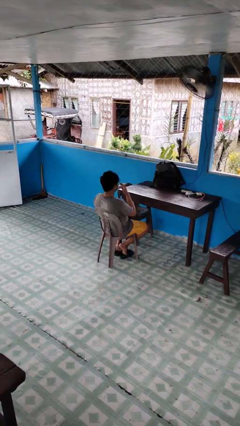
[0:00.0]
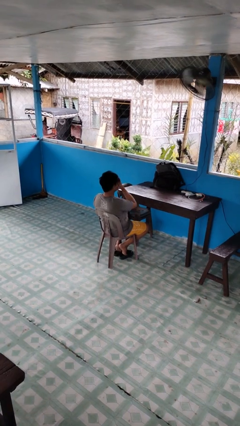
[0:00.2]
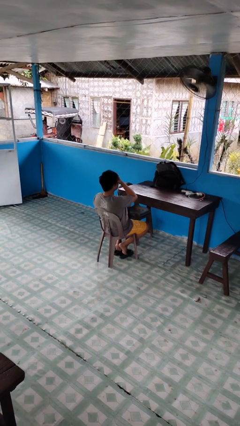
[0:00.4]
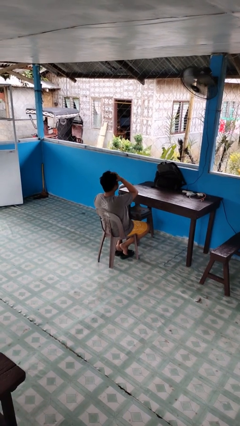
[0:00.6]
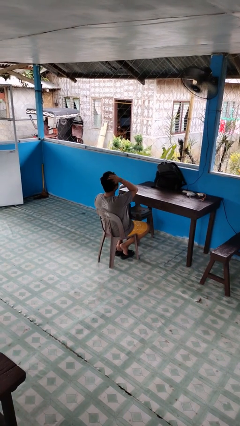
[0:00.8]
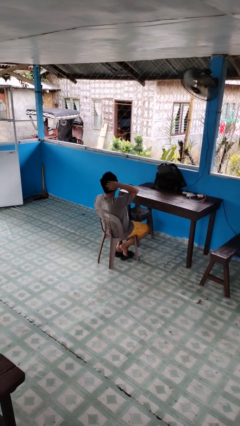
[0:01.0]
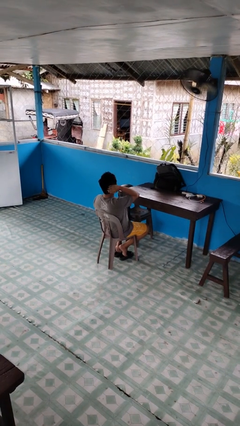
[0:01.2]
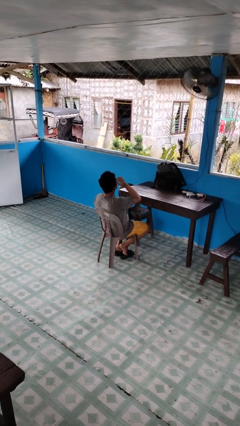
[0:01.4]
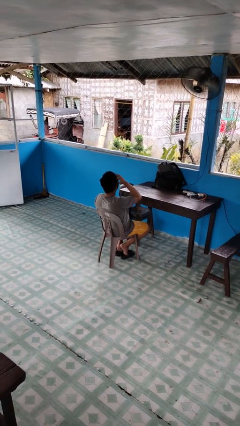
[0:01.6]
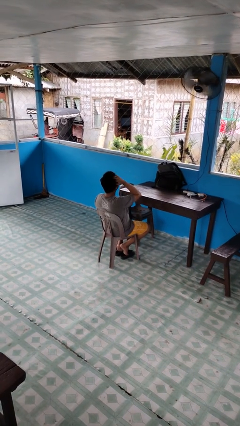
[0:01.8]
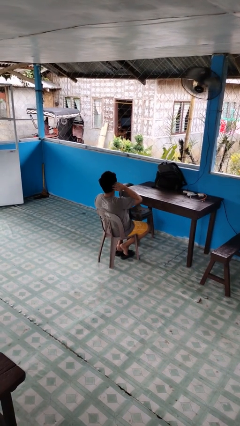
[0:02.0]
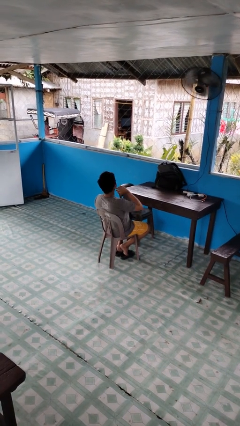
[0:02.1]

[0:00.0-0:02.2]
person strokes hair

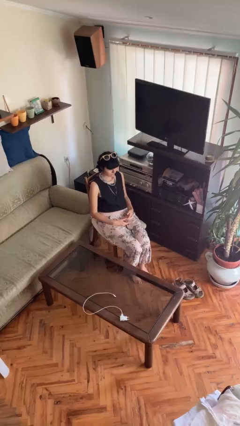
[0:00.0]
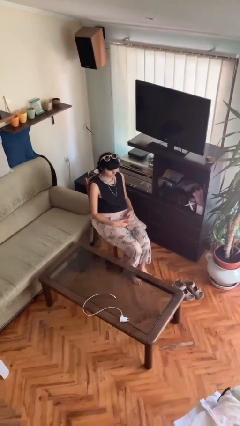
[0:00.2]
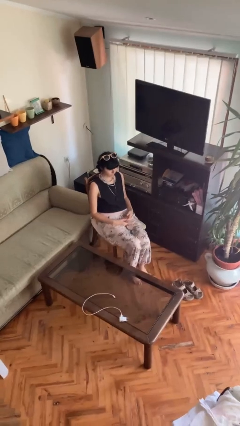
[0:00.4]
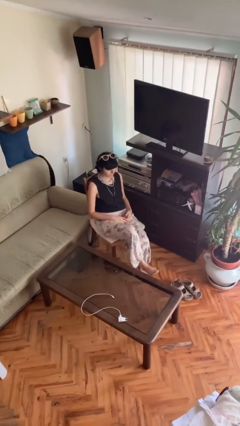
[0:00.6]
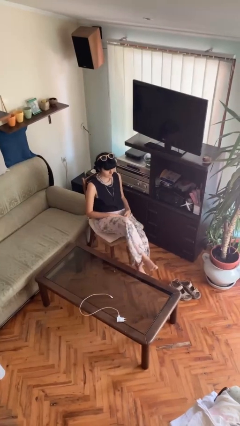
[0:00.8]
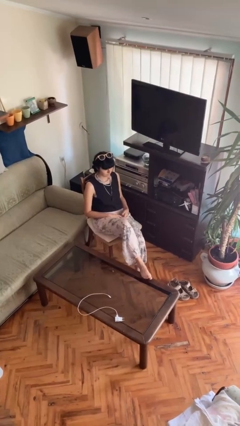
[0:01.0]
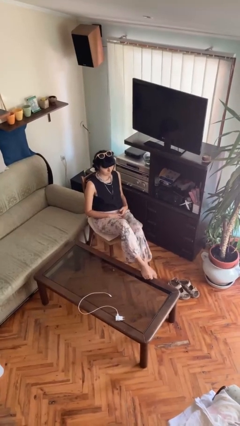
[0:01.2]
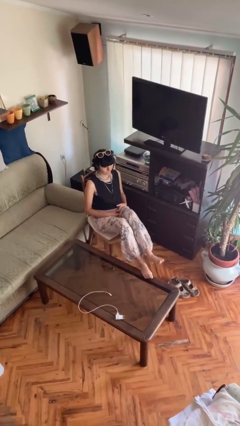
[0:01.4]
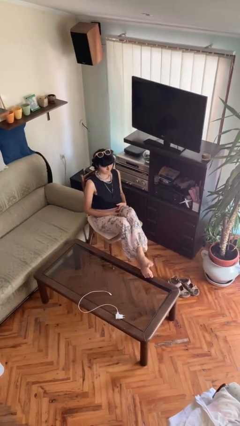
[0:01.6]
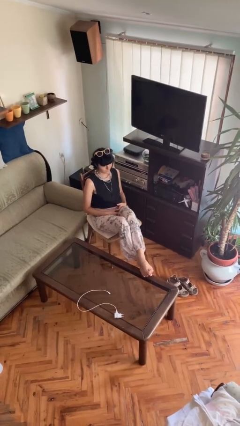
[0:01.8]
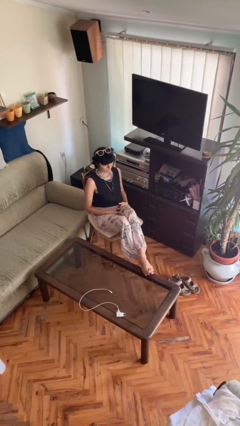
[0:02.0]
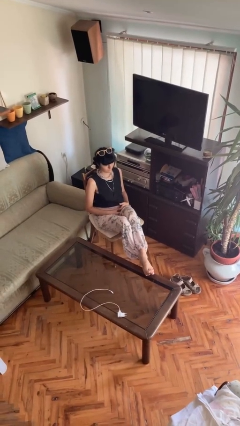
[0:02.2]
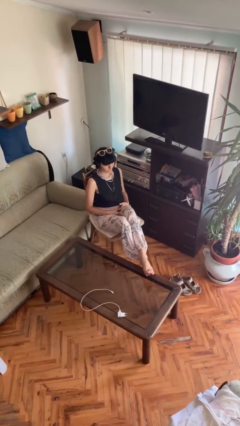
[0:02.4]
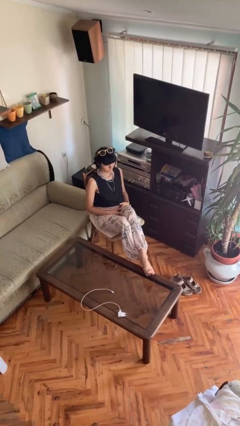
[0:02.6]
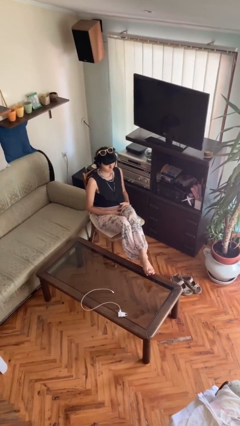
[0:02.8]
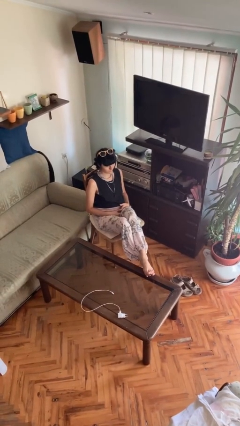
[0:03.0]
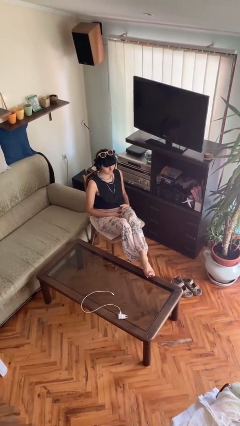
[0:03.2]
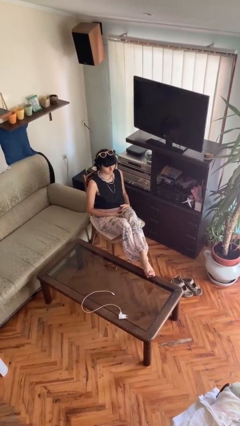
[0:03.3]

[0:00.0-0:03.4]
person puts feet up

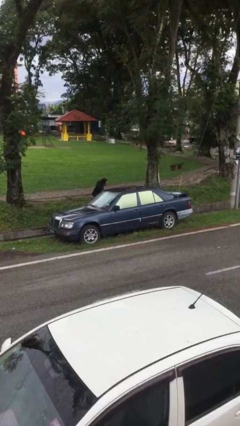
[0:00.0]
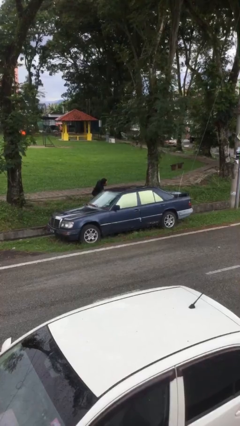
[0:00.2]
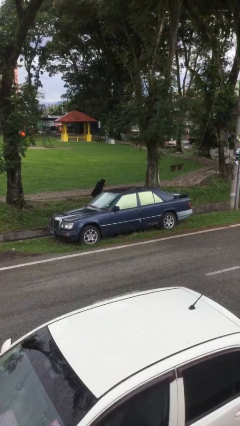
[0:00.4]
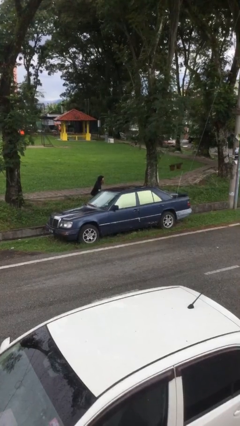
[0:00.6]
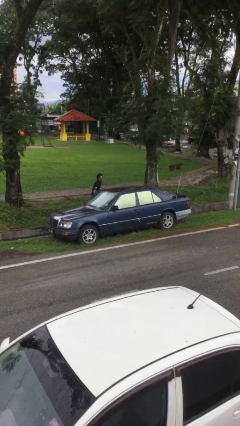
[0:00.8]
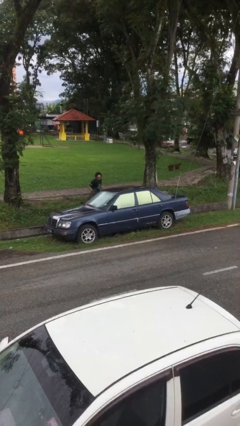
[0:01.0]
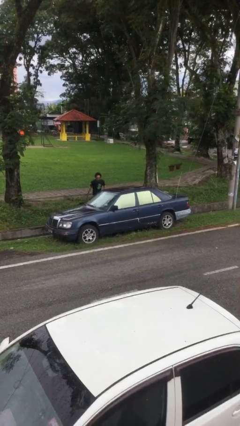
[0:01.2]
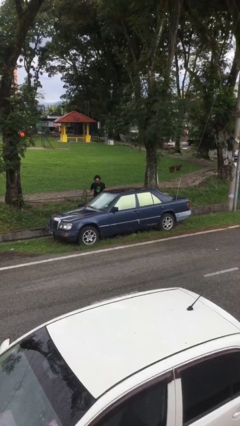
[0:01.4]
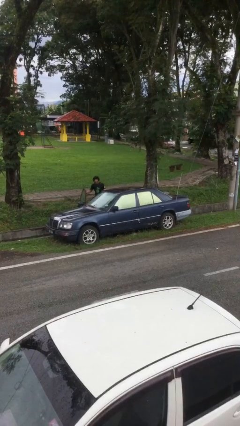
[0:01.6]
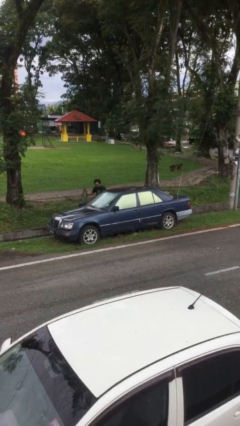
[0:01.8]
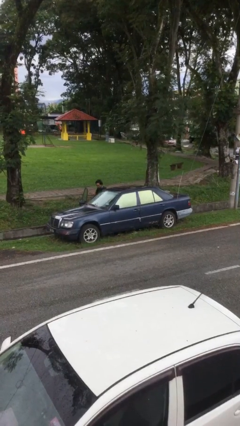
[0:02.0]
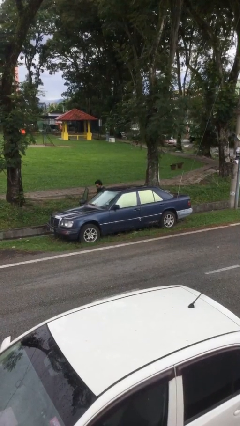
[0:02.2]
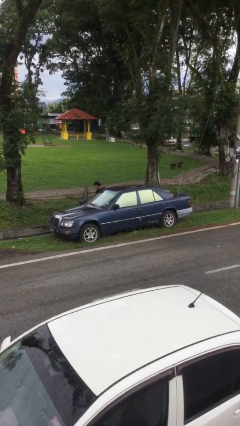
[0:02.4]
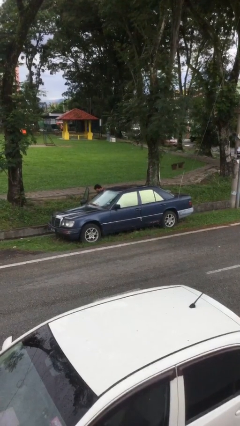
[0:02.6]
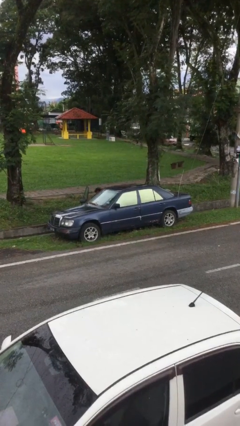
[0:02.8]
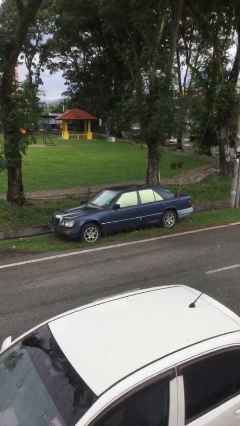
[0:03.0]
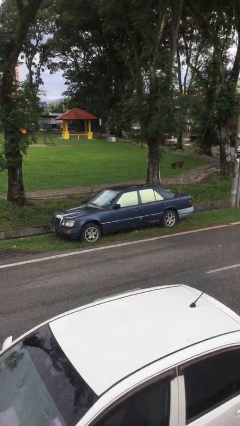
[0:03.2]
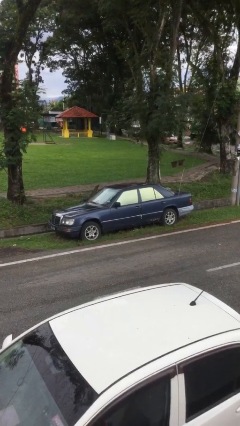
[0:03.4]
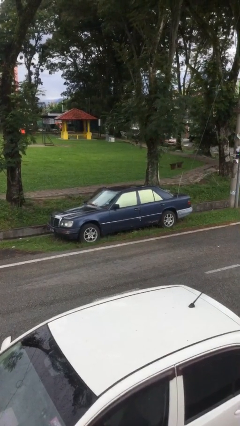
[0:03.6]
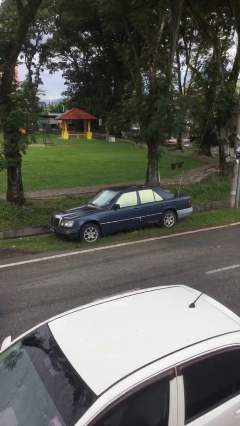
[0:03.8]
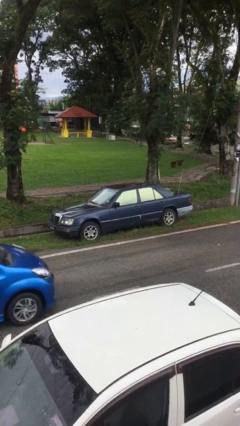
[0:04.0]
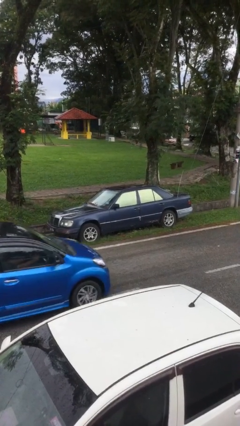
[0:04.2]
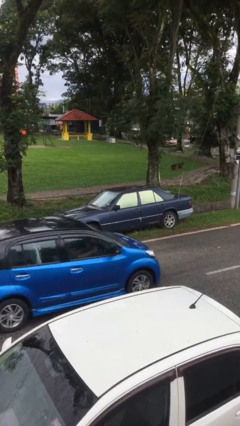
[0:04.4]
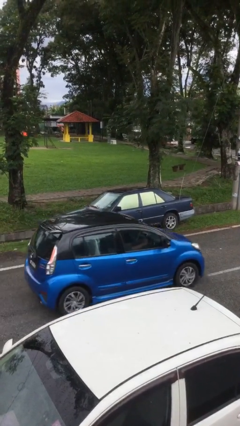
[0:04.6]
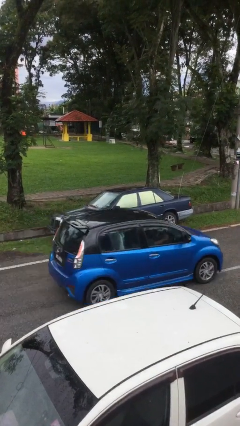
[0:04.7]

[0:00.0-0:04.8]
car picks up person

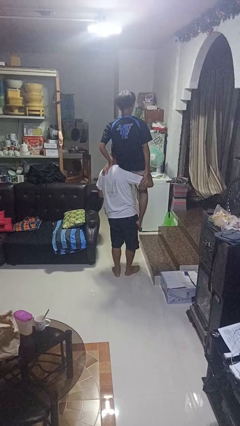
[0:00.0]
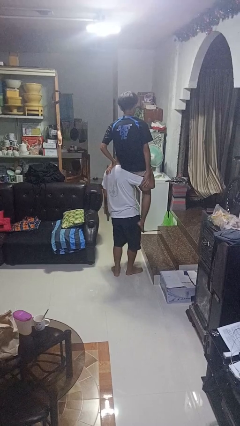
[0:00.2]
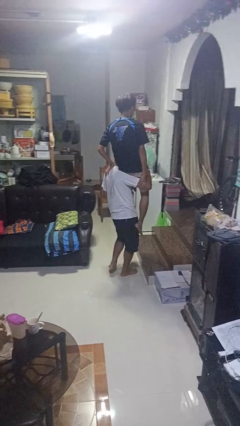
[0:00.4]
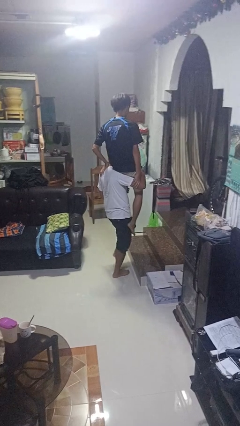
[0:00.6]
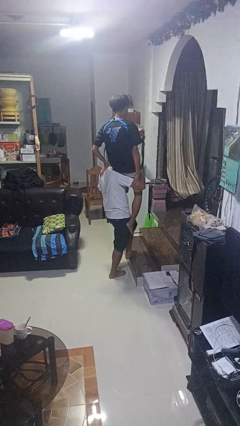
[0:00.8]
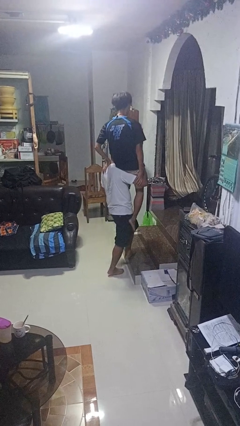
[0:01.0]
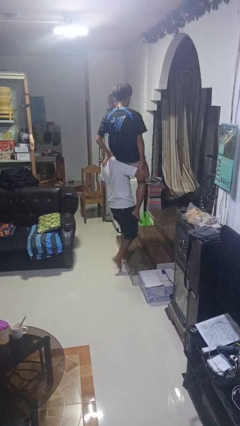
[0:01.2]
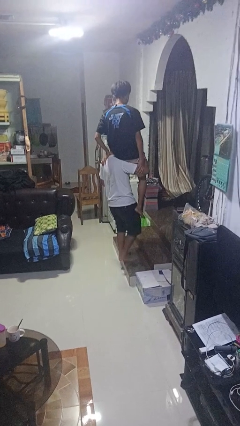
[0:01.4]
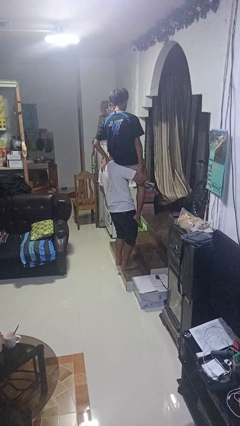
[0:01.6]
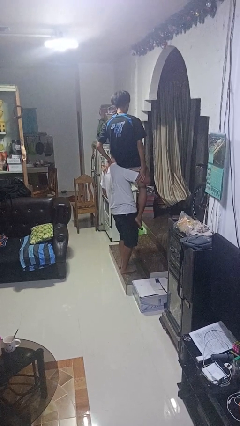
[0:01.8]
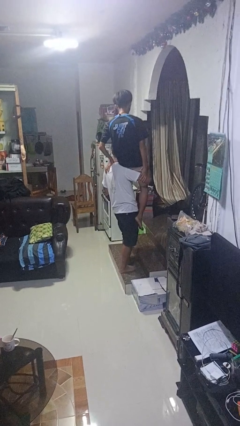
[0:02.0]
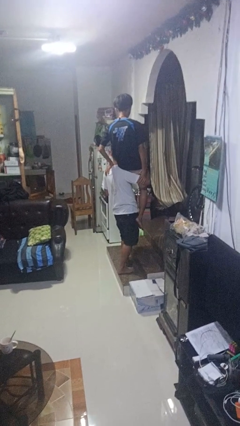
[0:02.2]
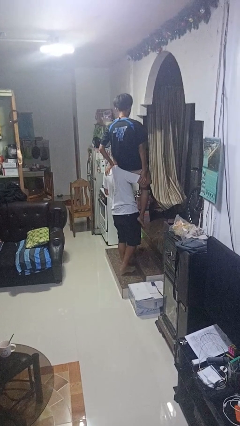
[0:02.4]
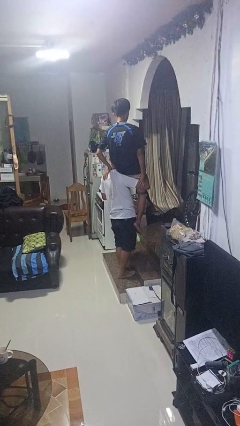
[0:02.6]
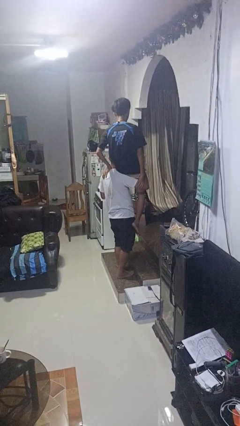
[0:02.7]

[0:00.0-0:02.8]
person carries person on shoulders

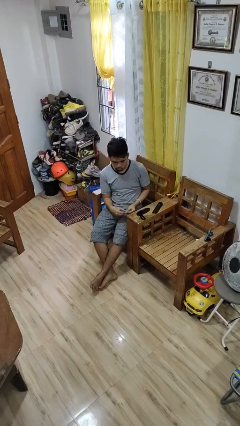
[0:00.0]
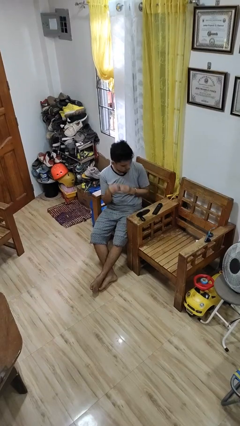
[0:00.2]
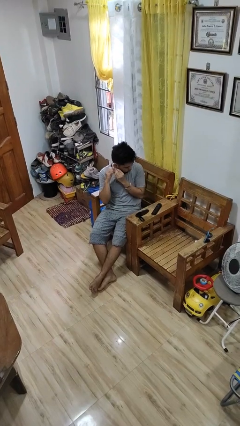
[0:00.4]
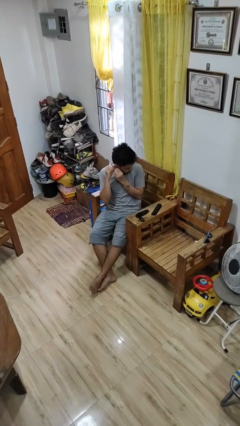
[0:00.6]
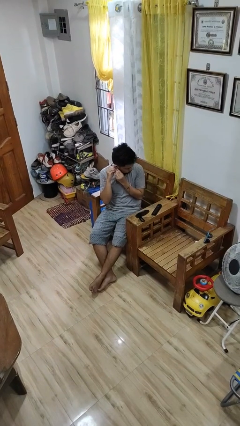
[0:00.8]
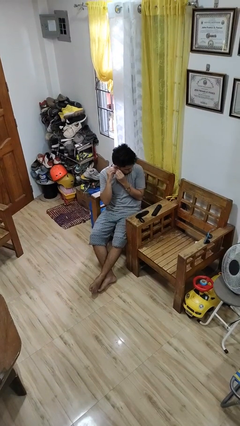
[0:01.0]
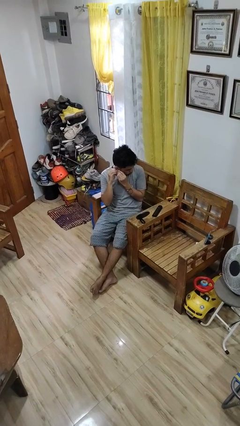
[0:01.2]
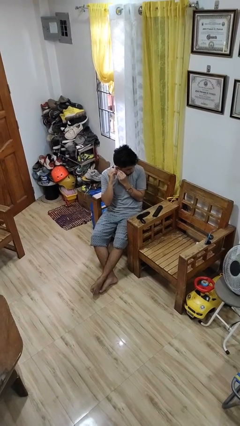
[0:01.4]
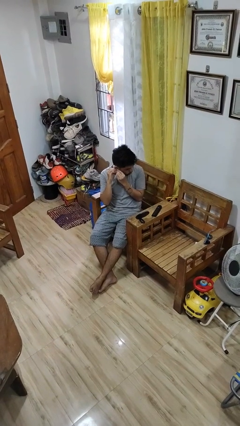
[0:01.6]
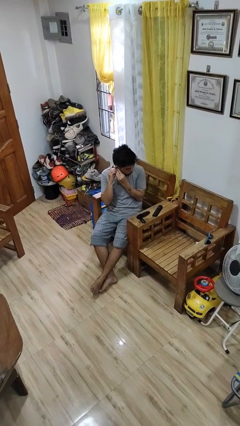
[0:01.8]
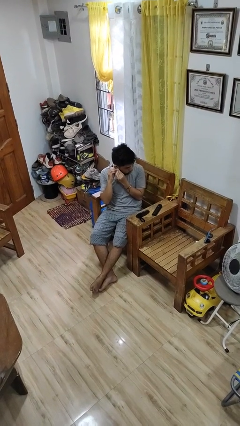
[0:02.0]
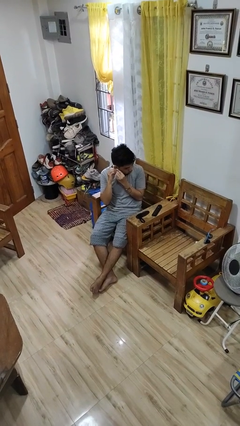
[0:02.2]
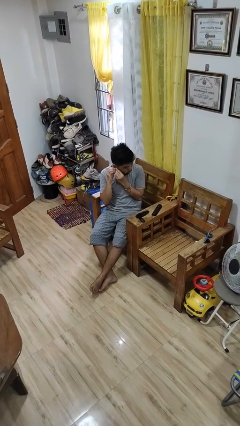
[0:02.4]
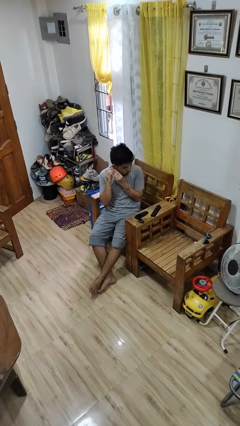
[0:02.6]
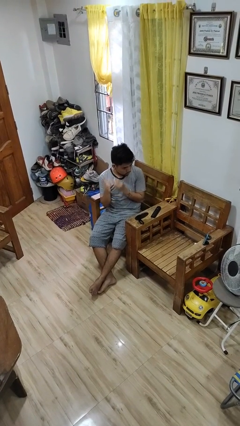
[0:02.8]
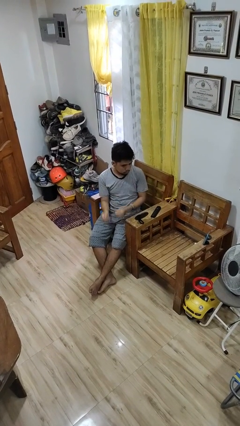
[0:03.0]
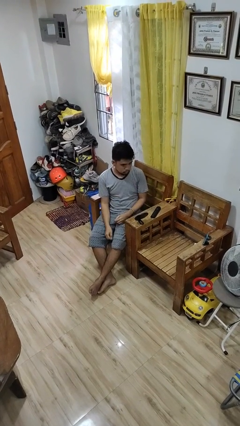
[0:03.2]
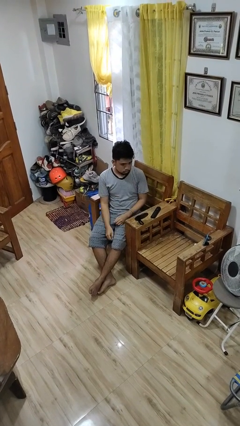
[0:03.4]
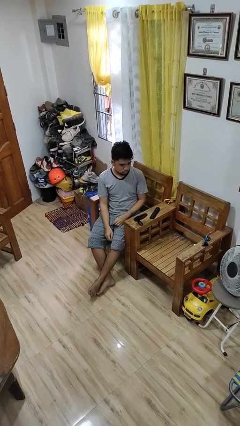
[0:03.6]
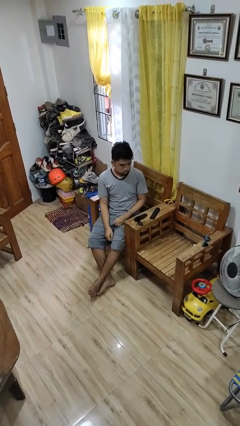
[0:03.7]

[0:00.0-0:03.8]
person puts on earrings

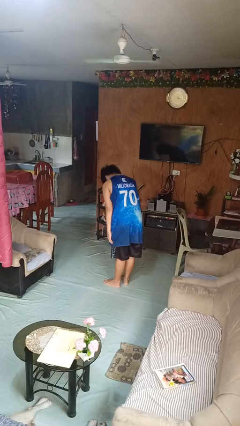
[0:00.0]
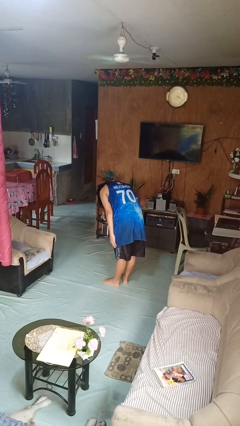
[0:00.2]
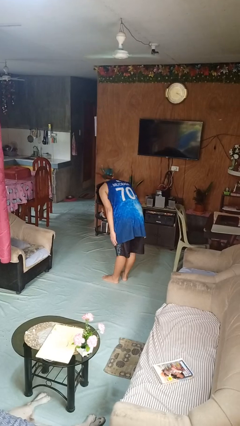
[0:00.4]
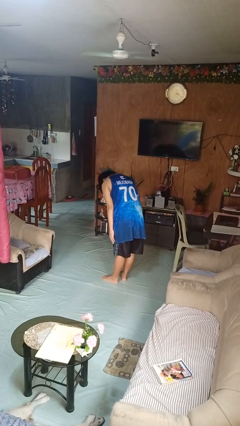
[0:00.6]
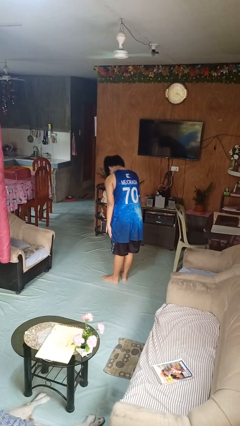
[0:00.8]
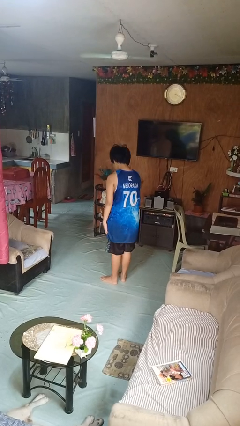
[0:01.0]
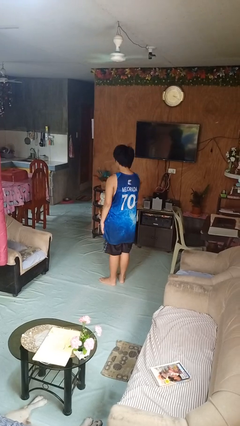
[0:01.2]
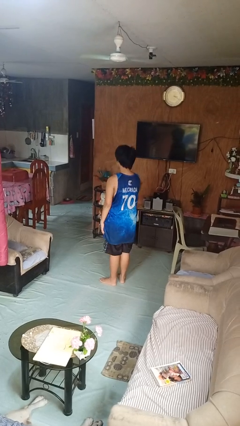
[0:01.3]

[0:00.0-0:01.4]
person bows
